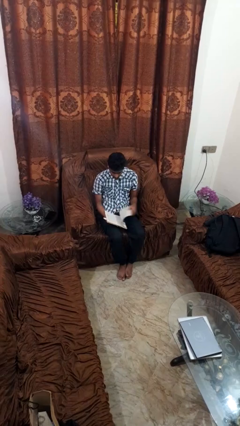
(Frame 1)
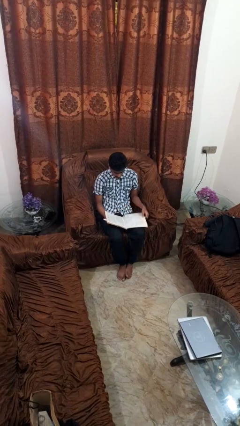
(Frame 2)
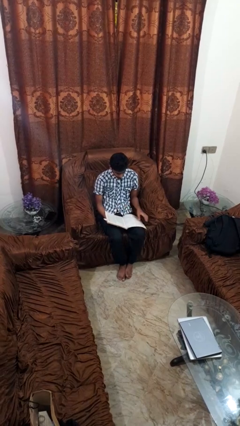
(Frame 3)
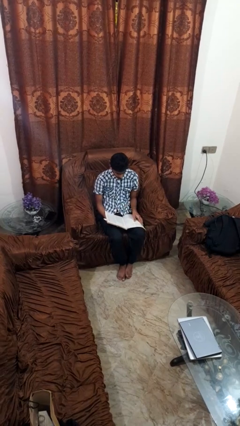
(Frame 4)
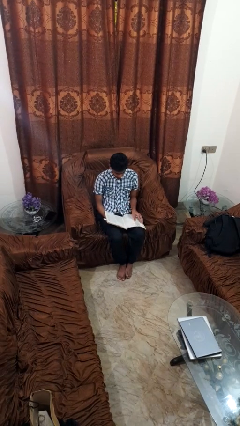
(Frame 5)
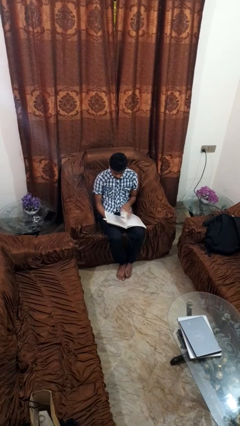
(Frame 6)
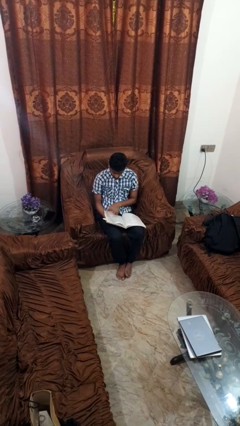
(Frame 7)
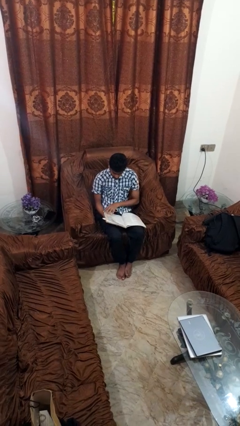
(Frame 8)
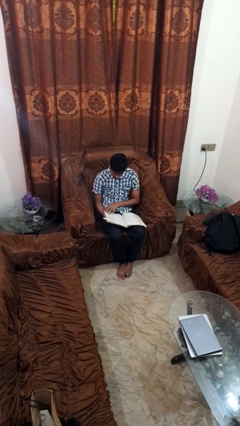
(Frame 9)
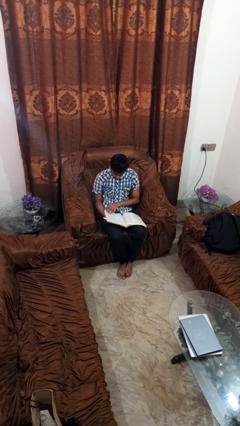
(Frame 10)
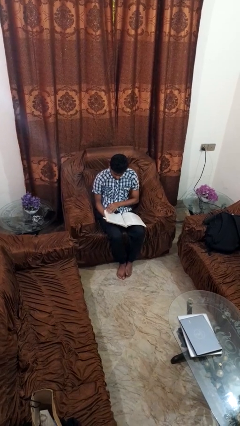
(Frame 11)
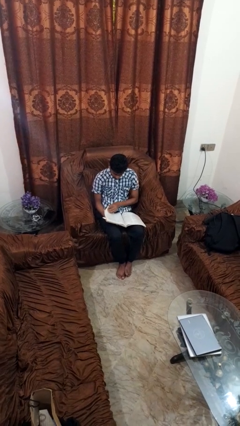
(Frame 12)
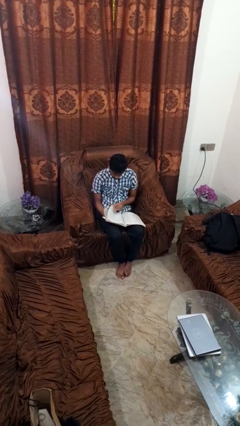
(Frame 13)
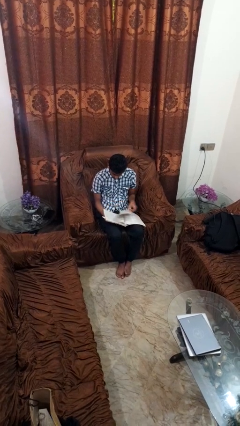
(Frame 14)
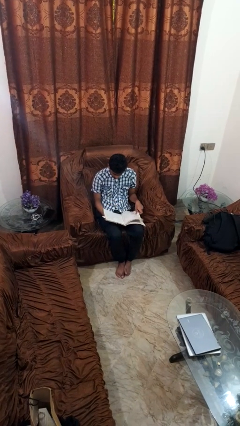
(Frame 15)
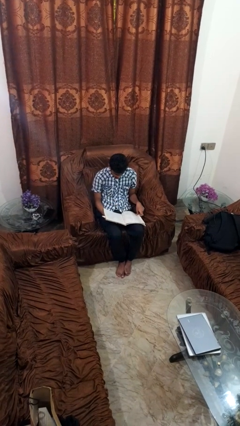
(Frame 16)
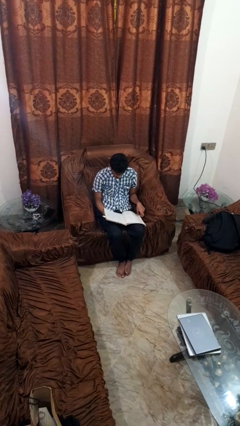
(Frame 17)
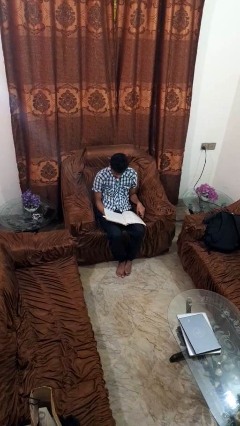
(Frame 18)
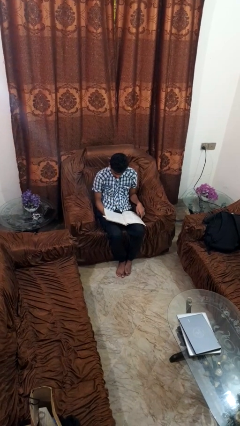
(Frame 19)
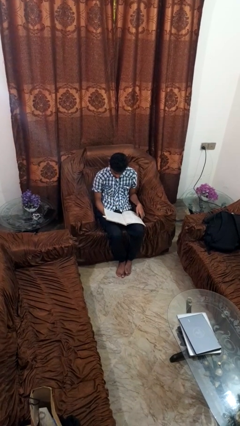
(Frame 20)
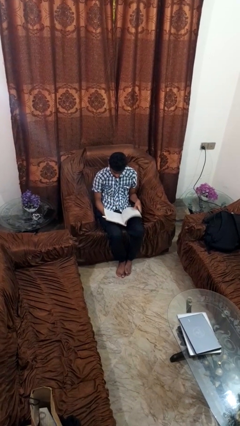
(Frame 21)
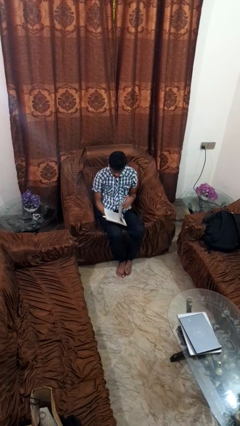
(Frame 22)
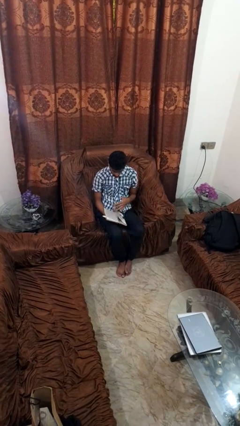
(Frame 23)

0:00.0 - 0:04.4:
person reads magazine

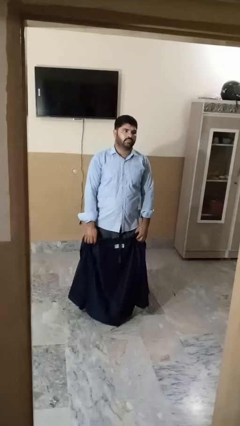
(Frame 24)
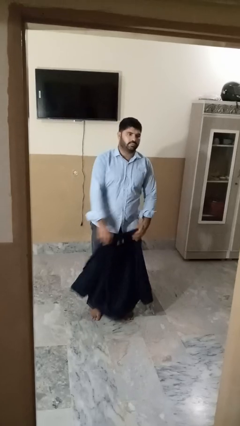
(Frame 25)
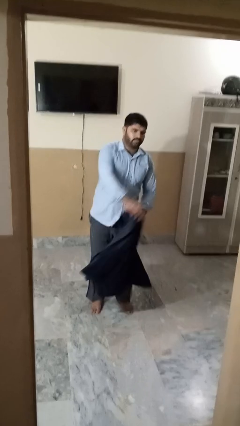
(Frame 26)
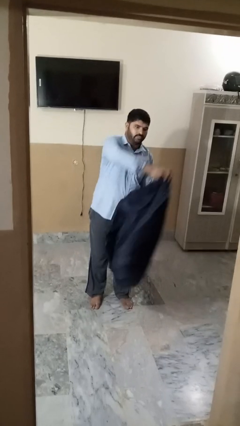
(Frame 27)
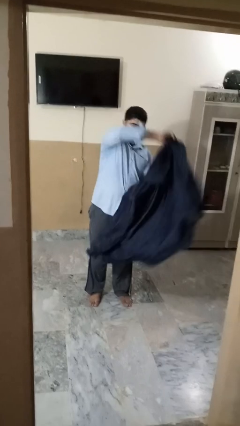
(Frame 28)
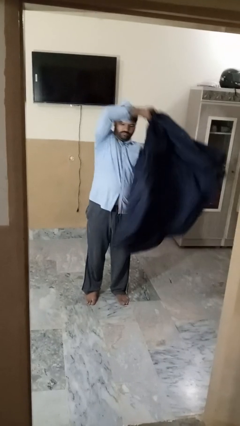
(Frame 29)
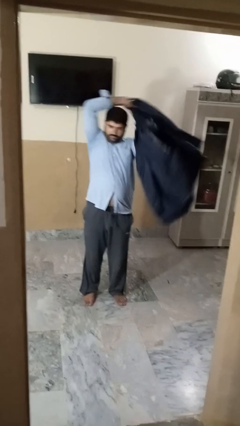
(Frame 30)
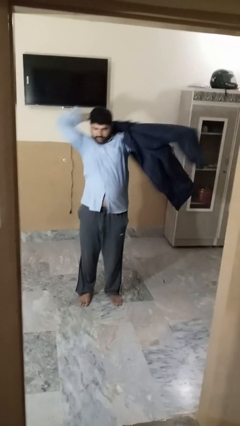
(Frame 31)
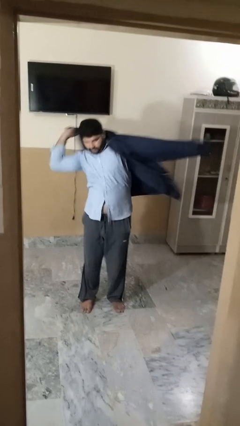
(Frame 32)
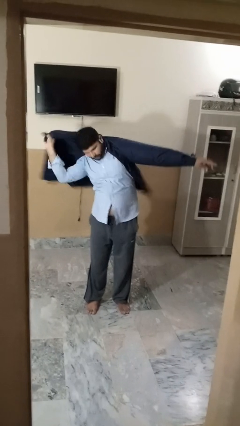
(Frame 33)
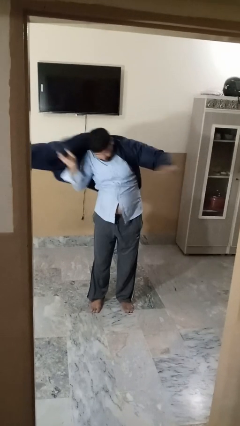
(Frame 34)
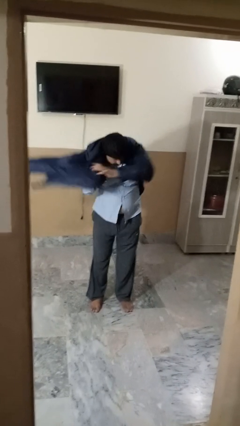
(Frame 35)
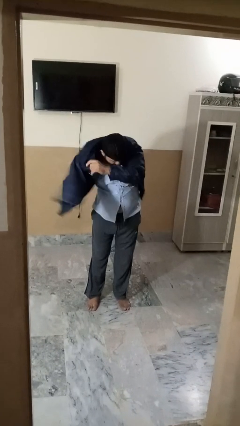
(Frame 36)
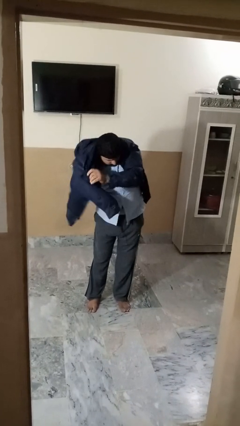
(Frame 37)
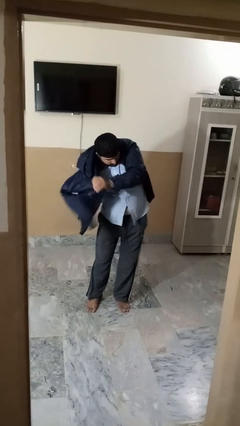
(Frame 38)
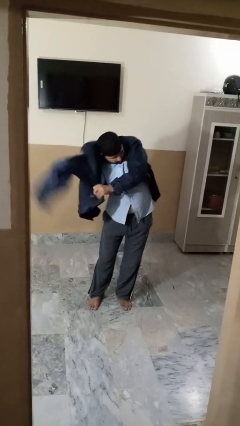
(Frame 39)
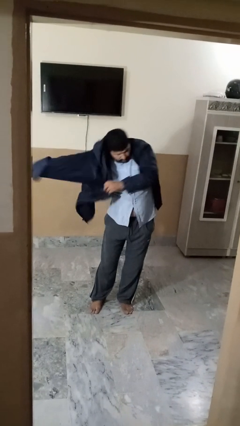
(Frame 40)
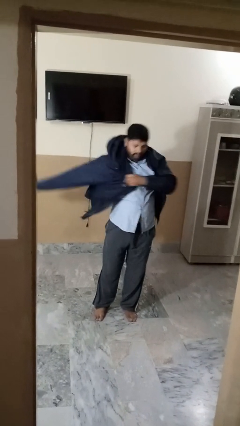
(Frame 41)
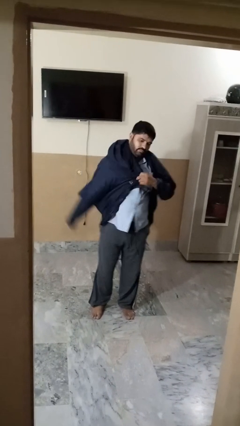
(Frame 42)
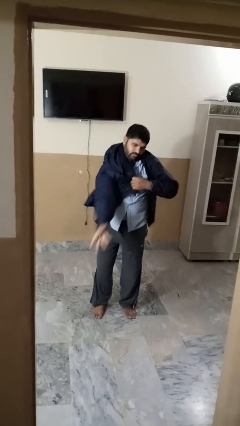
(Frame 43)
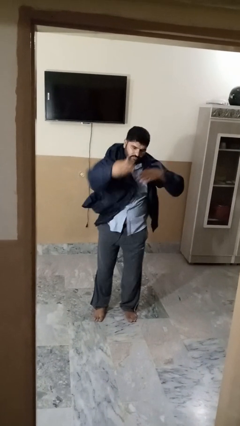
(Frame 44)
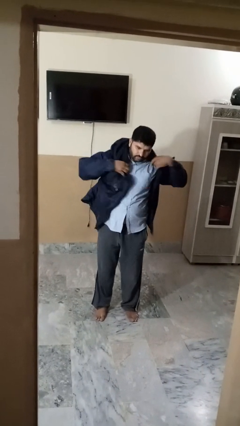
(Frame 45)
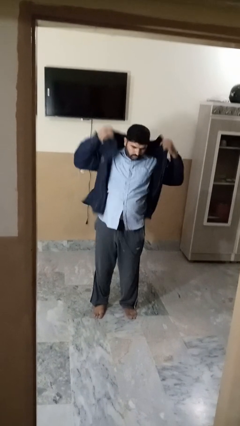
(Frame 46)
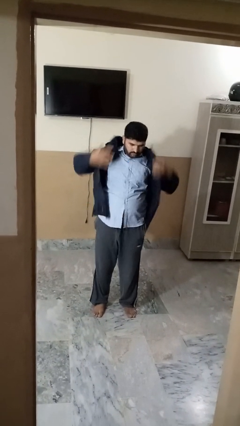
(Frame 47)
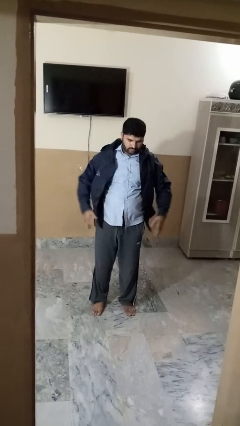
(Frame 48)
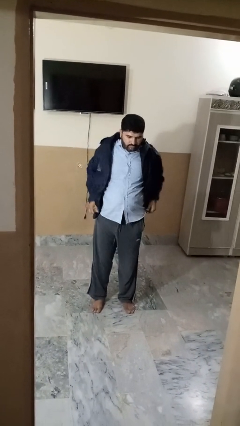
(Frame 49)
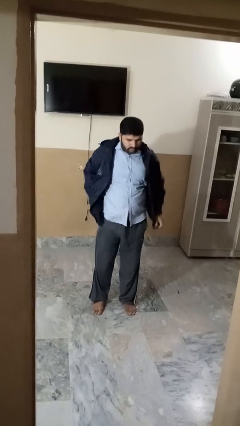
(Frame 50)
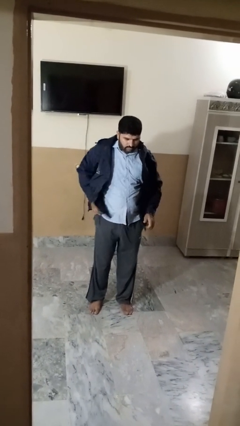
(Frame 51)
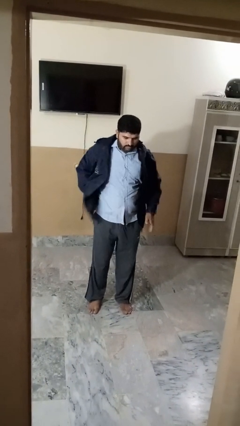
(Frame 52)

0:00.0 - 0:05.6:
person puts on jacket

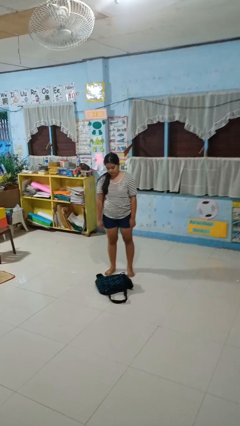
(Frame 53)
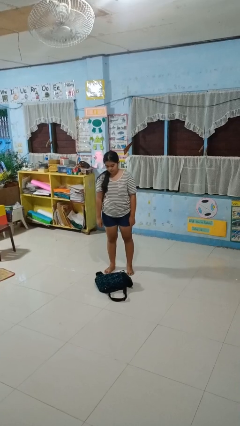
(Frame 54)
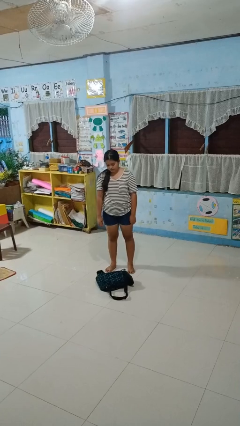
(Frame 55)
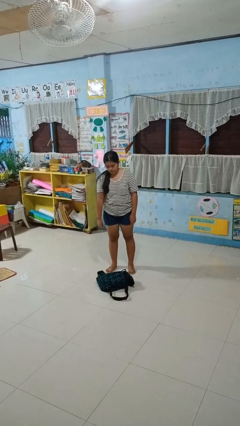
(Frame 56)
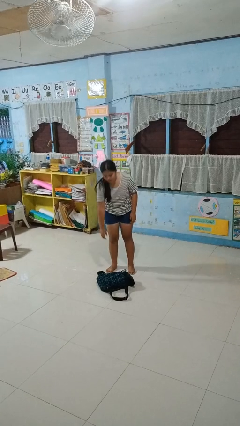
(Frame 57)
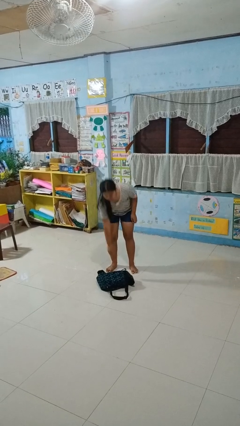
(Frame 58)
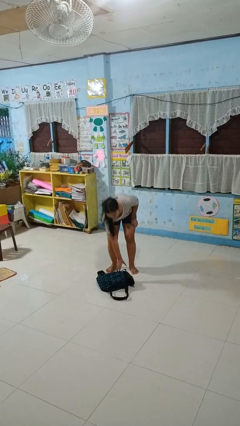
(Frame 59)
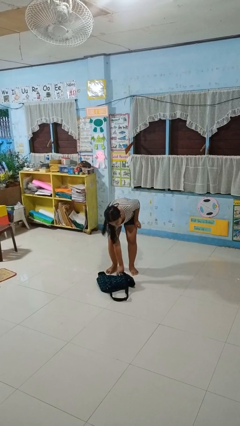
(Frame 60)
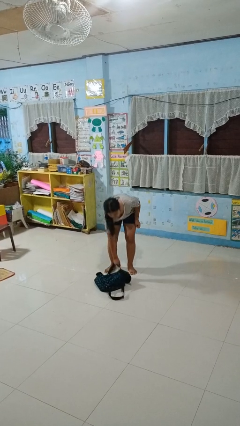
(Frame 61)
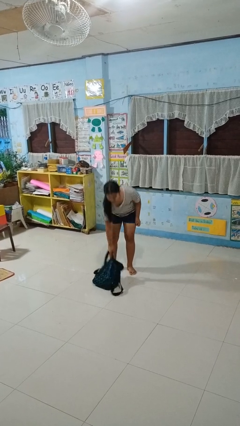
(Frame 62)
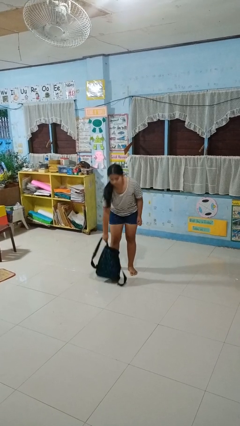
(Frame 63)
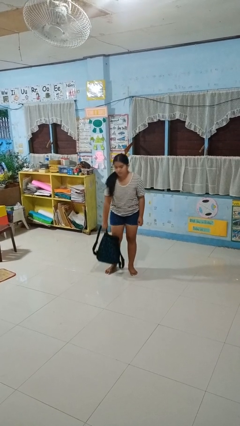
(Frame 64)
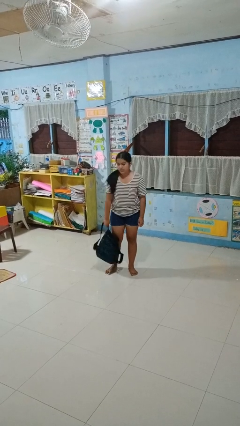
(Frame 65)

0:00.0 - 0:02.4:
person picks up object from floor

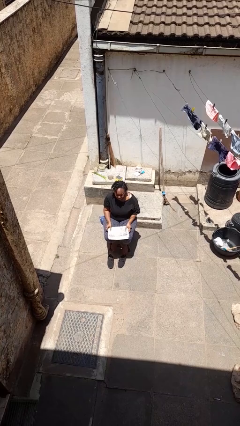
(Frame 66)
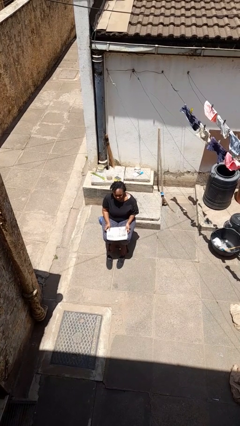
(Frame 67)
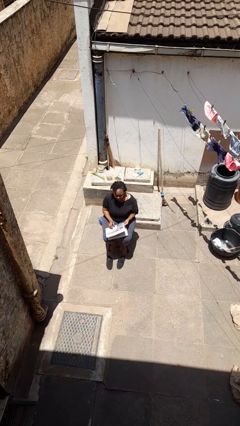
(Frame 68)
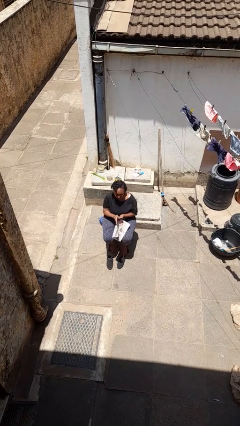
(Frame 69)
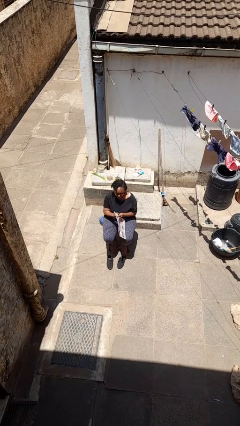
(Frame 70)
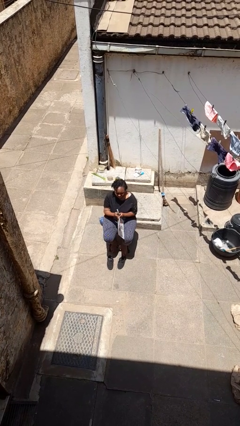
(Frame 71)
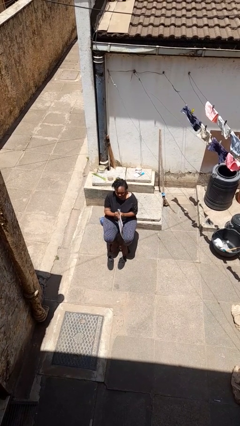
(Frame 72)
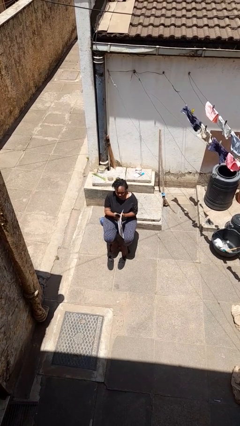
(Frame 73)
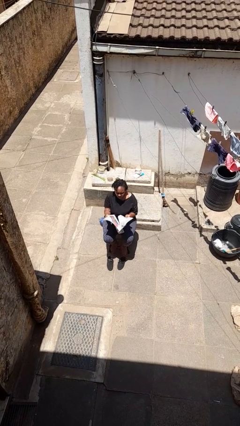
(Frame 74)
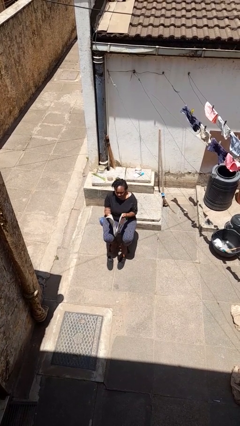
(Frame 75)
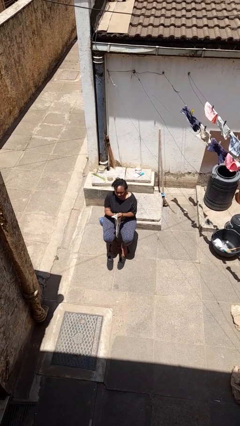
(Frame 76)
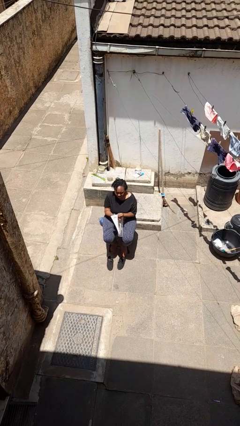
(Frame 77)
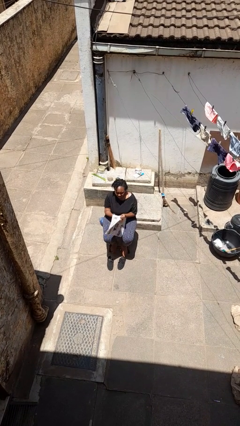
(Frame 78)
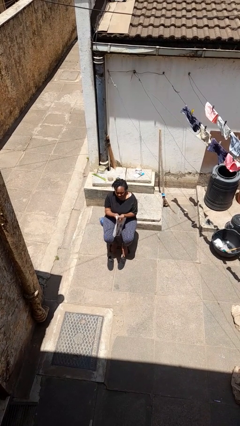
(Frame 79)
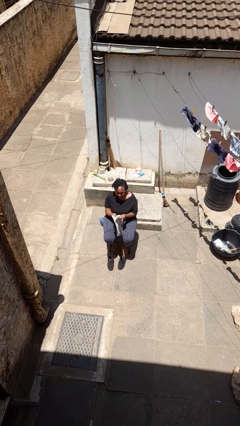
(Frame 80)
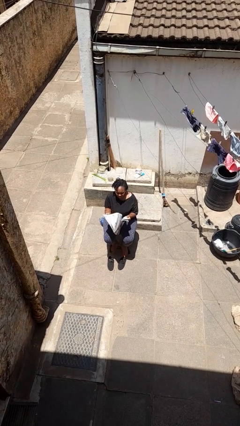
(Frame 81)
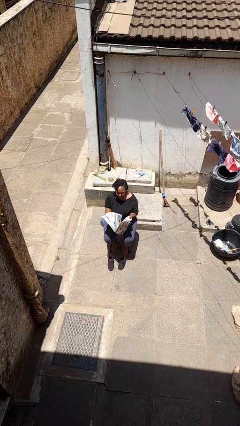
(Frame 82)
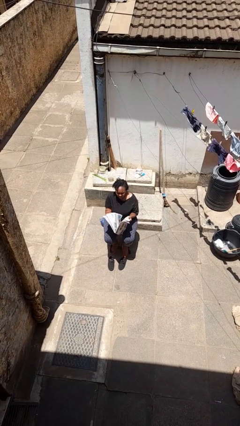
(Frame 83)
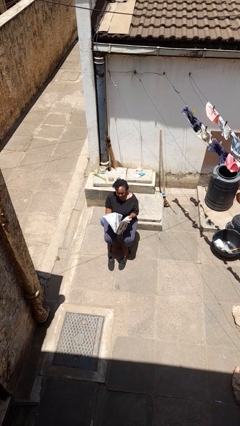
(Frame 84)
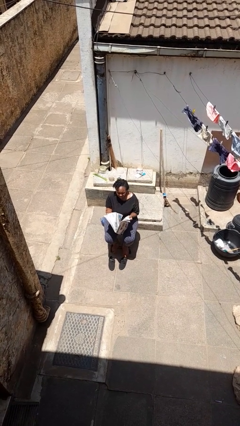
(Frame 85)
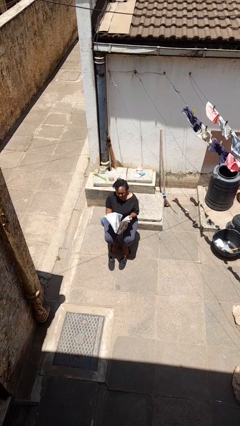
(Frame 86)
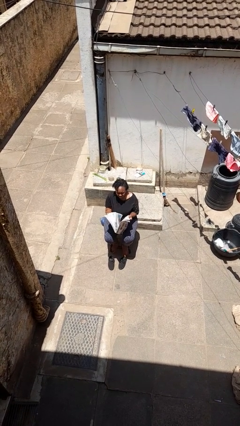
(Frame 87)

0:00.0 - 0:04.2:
person reads newspaper

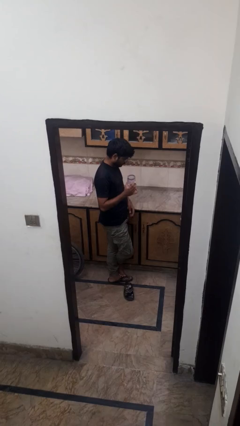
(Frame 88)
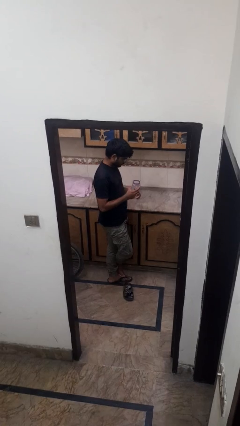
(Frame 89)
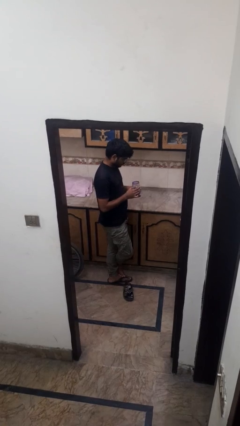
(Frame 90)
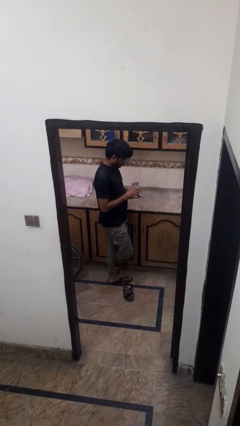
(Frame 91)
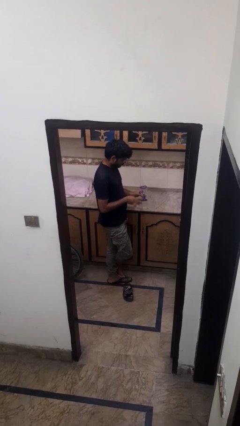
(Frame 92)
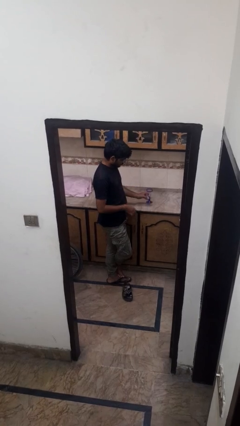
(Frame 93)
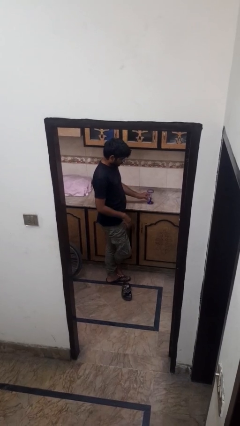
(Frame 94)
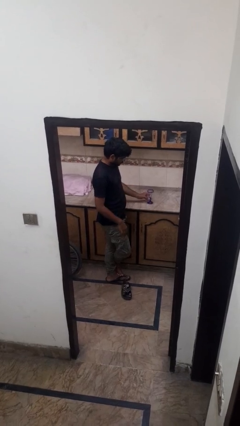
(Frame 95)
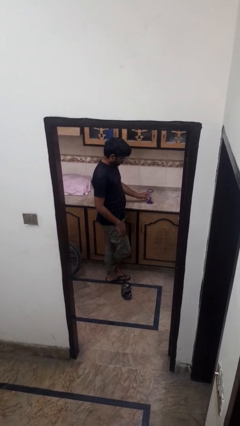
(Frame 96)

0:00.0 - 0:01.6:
person puts down object on countertop
